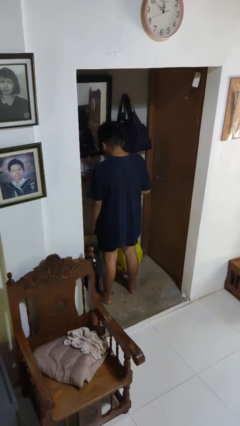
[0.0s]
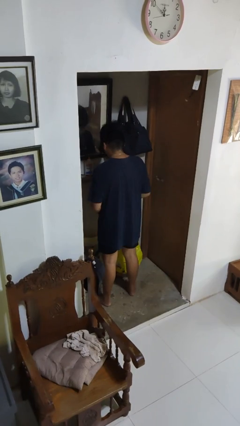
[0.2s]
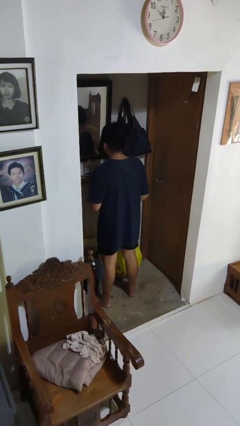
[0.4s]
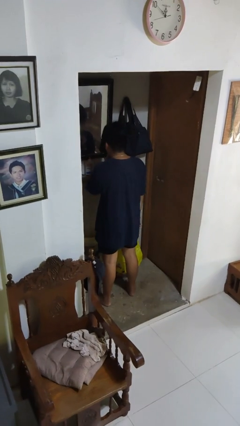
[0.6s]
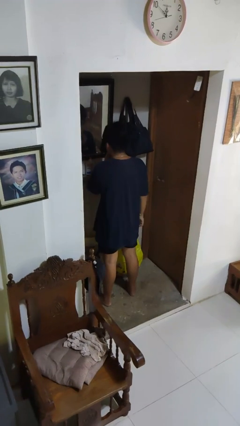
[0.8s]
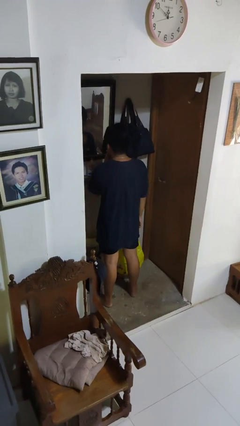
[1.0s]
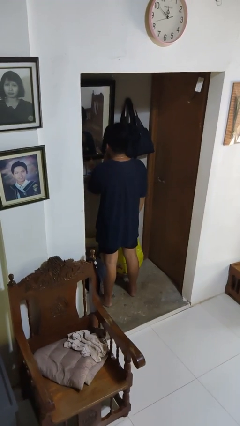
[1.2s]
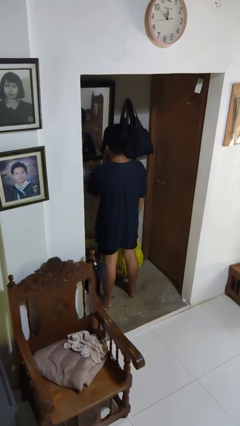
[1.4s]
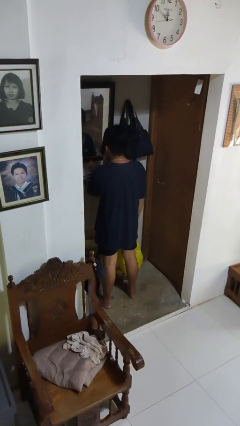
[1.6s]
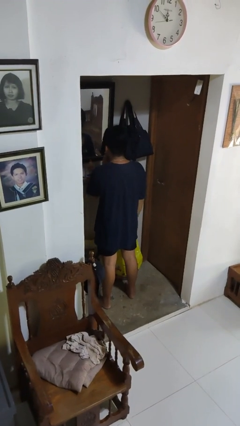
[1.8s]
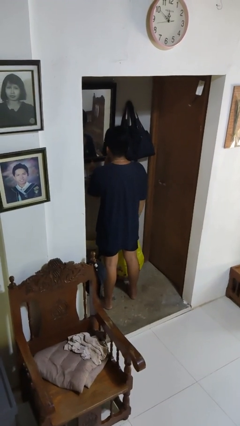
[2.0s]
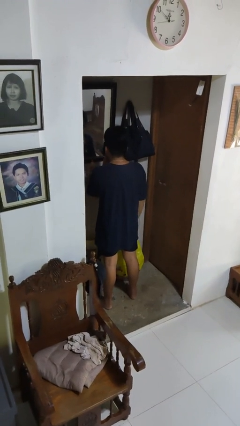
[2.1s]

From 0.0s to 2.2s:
person applies lip makeup

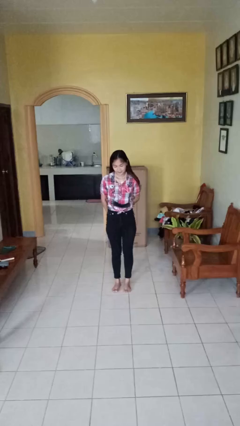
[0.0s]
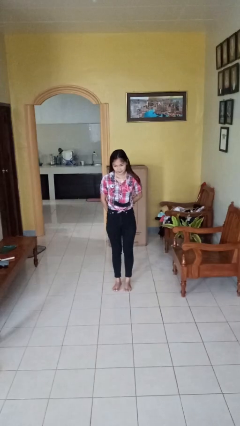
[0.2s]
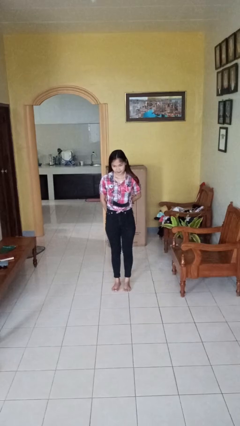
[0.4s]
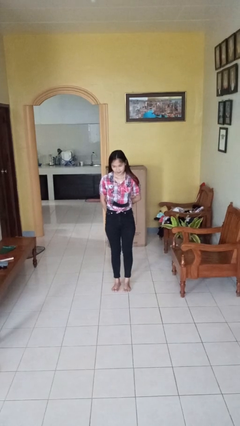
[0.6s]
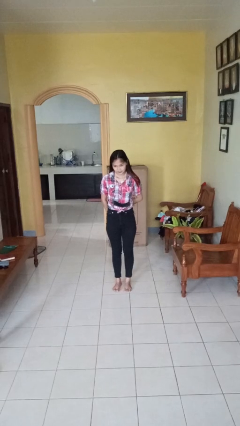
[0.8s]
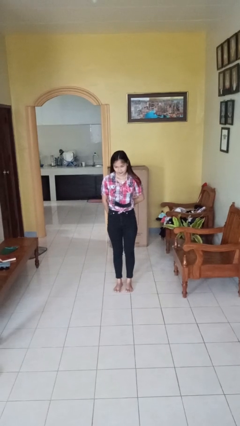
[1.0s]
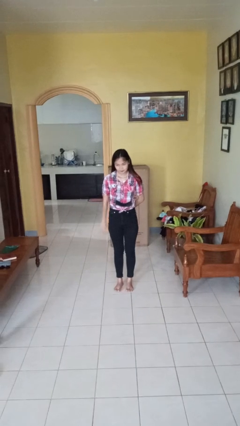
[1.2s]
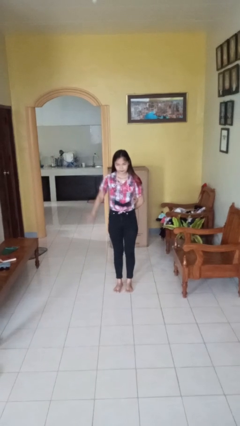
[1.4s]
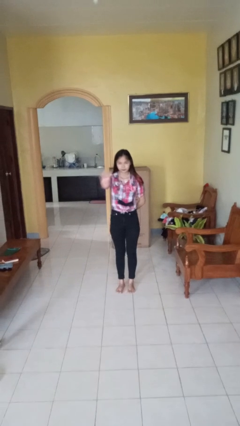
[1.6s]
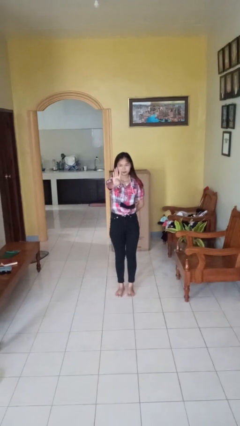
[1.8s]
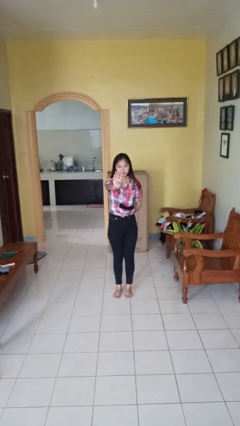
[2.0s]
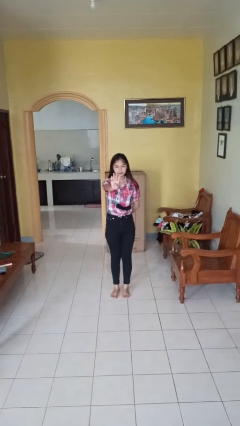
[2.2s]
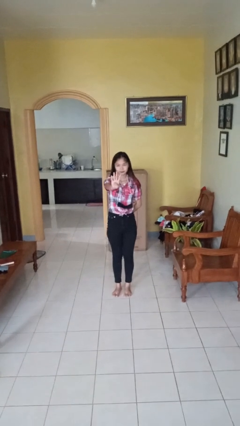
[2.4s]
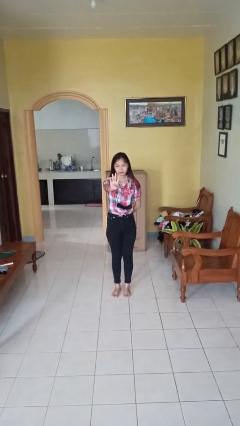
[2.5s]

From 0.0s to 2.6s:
person gestures number four

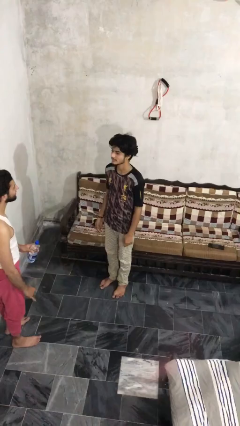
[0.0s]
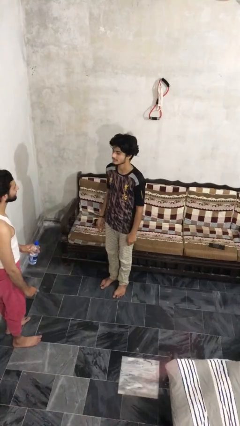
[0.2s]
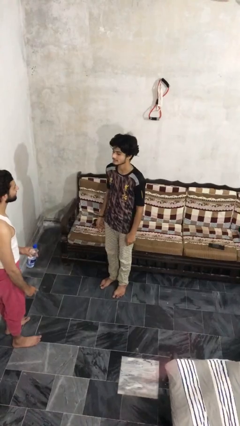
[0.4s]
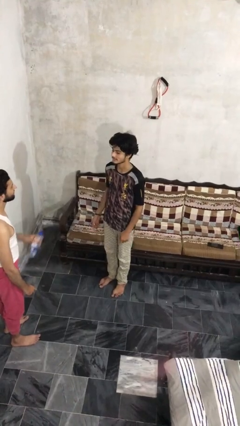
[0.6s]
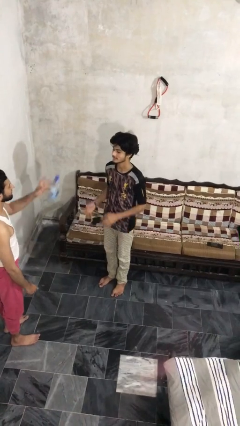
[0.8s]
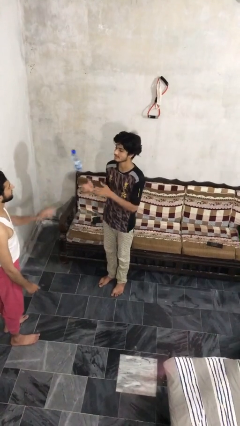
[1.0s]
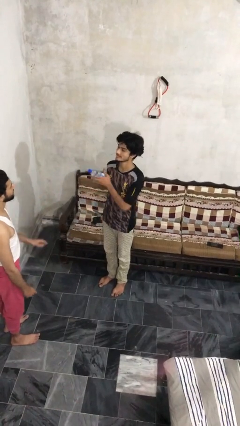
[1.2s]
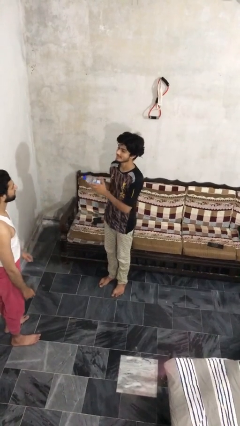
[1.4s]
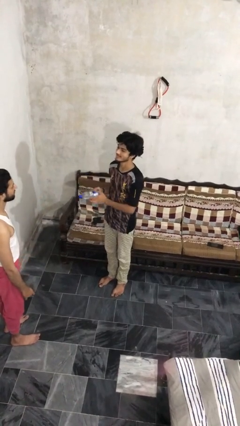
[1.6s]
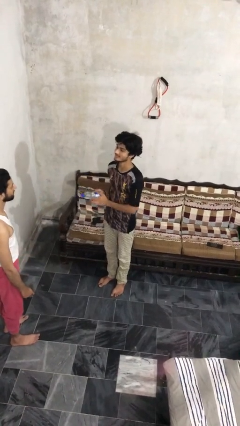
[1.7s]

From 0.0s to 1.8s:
person catches object from person

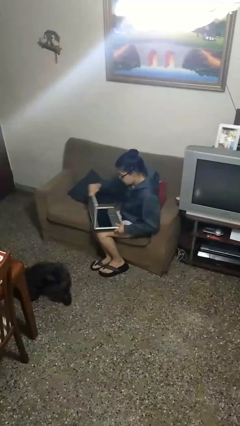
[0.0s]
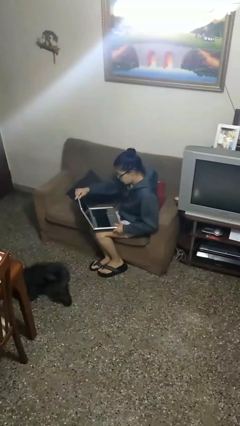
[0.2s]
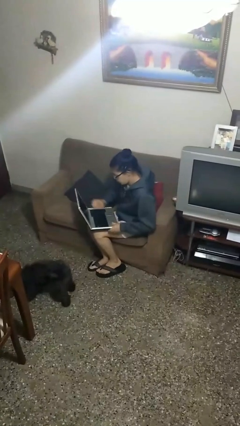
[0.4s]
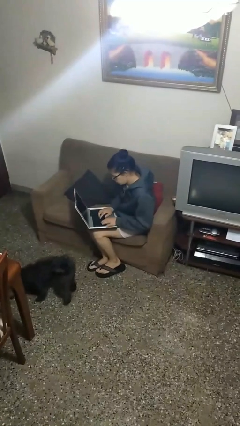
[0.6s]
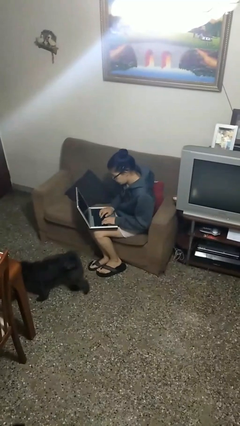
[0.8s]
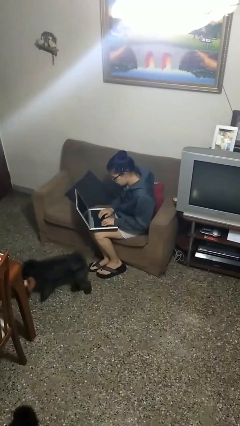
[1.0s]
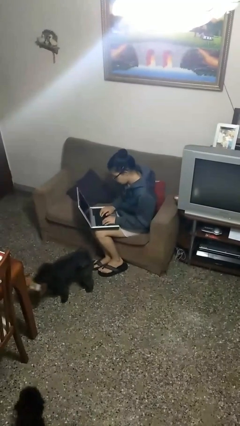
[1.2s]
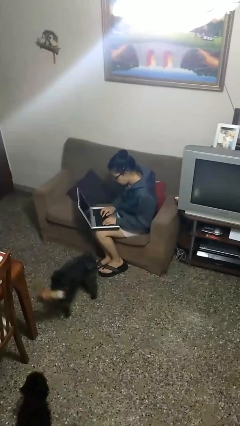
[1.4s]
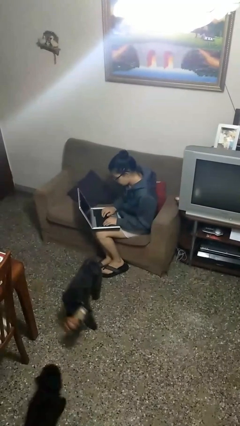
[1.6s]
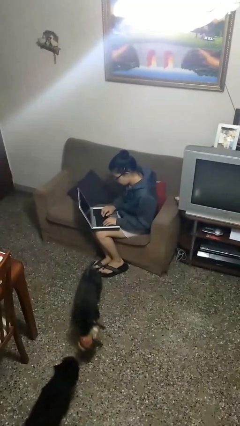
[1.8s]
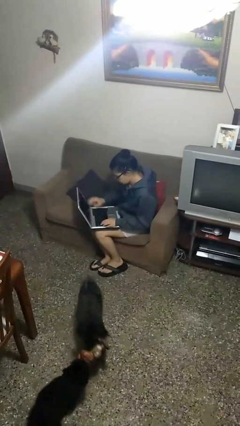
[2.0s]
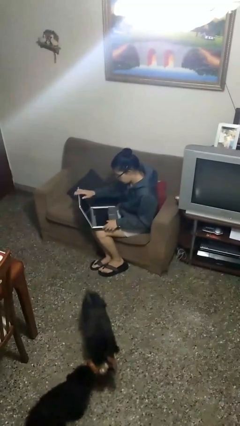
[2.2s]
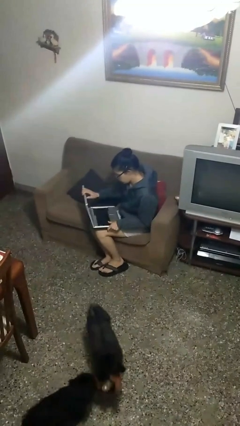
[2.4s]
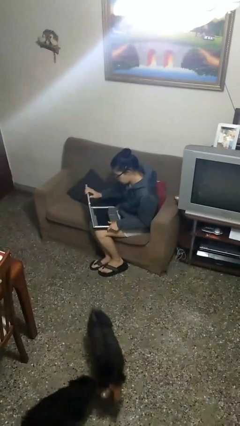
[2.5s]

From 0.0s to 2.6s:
person interacts with laptop

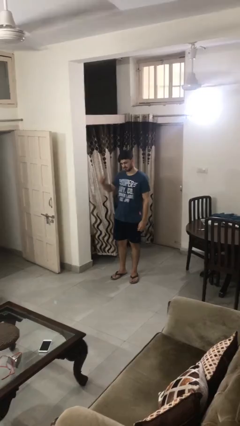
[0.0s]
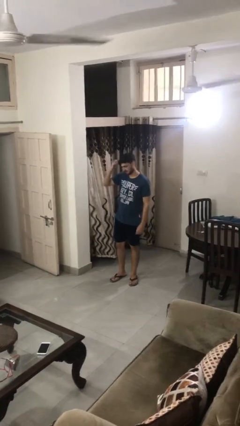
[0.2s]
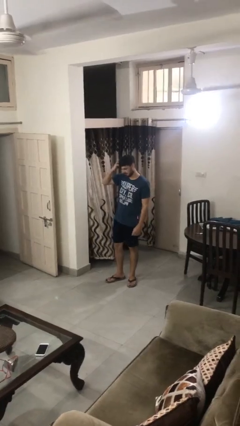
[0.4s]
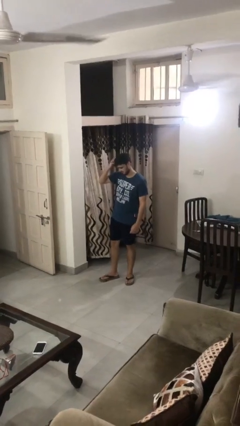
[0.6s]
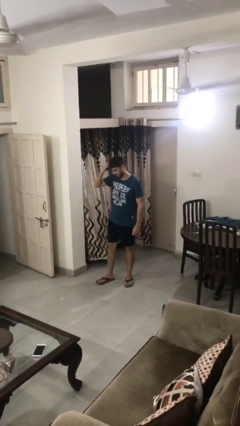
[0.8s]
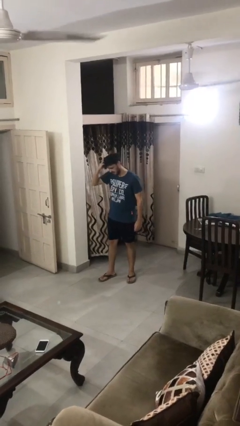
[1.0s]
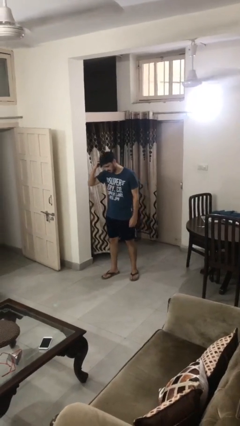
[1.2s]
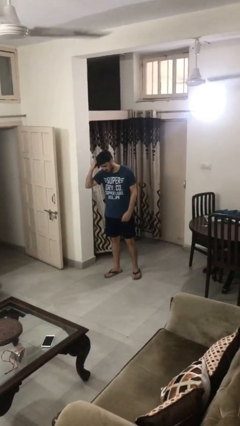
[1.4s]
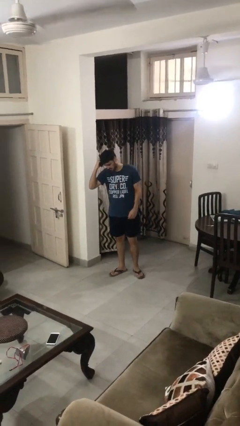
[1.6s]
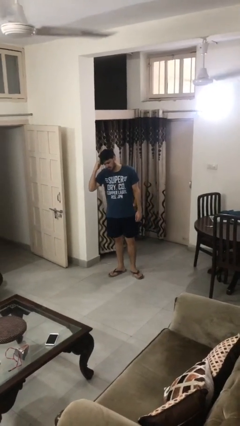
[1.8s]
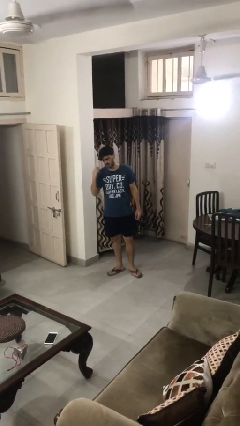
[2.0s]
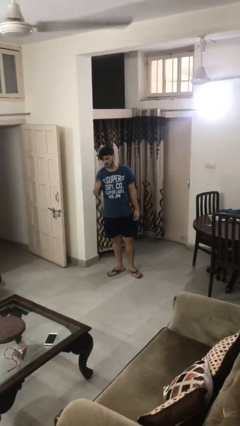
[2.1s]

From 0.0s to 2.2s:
person scratches face

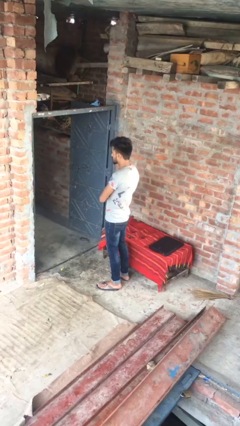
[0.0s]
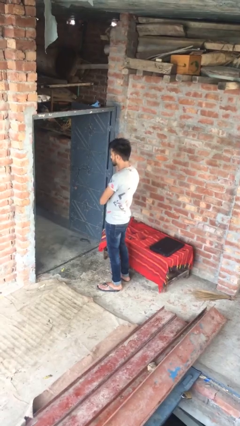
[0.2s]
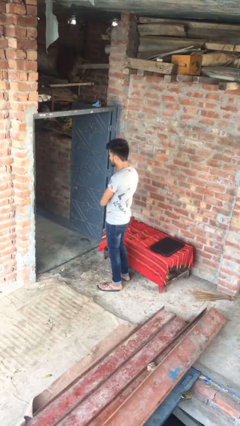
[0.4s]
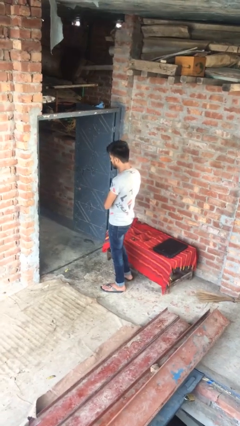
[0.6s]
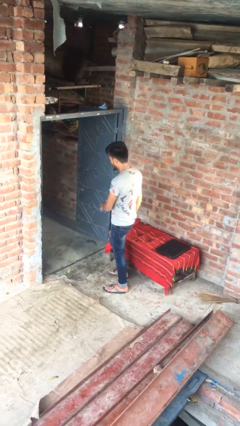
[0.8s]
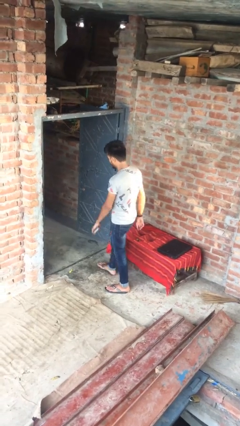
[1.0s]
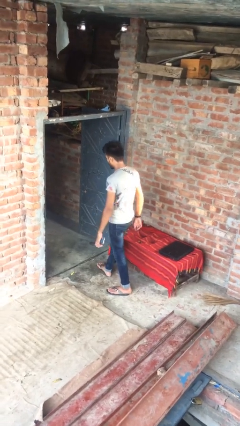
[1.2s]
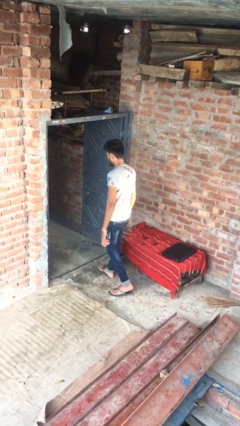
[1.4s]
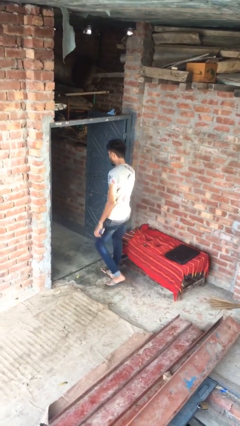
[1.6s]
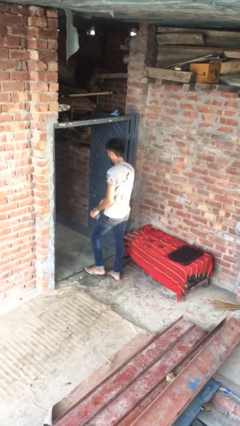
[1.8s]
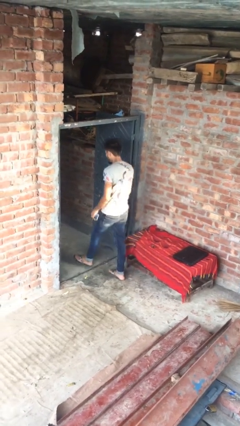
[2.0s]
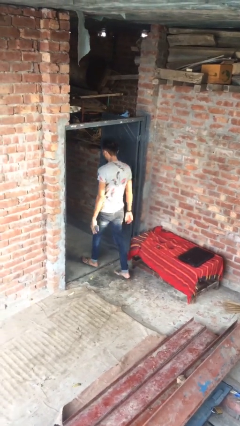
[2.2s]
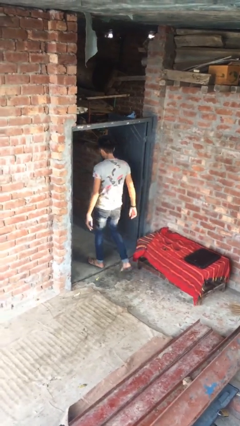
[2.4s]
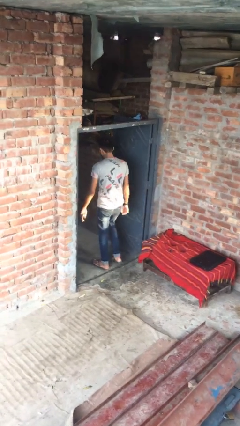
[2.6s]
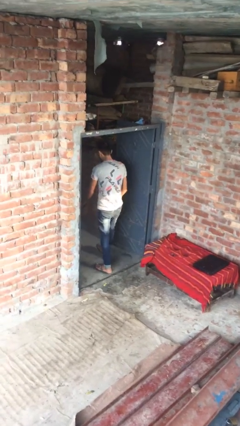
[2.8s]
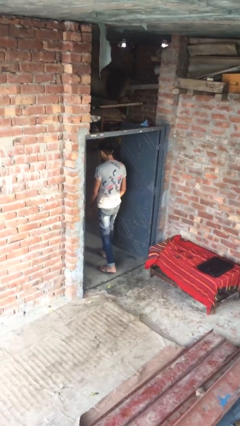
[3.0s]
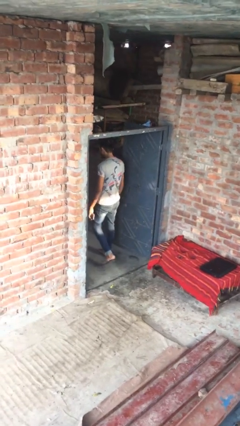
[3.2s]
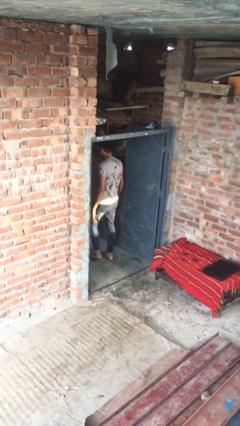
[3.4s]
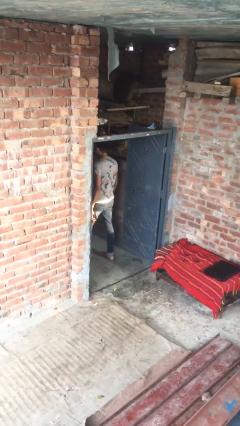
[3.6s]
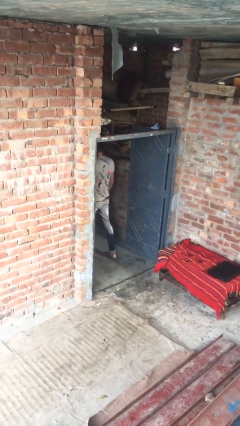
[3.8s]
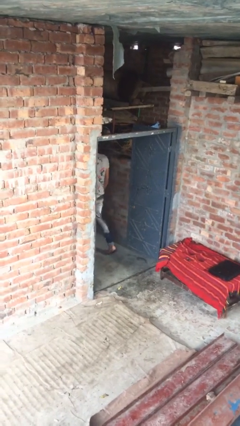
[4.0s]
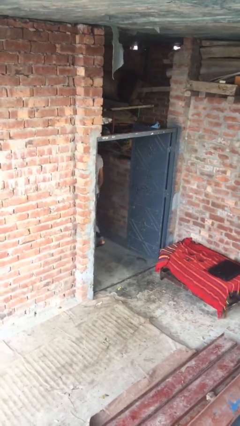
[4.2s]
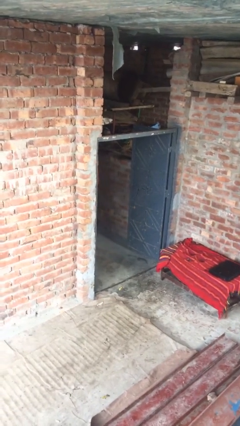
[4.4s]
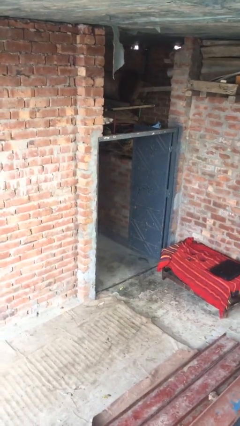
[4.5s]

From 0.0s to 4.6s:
person exits scene through structure

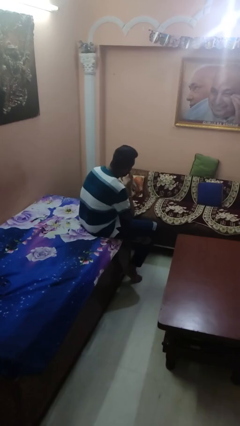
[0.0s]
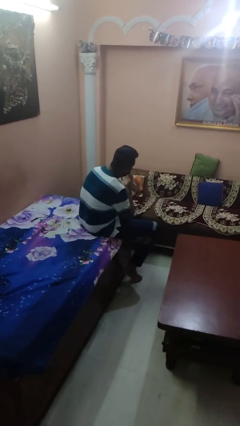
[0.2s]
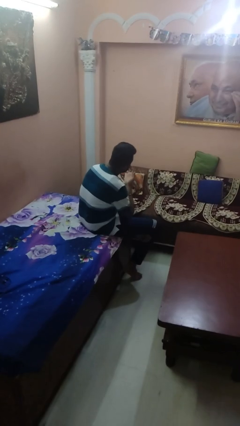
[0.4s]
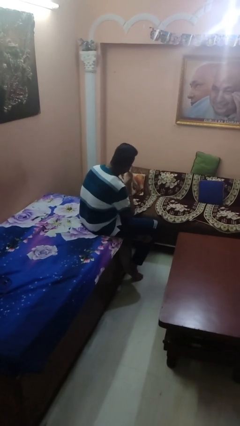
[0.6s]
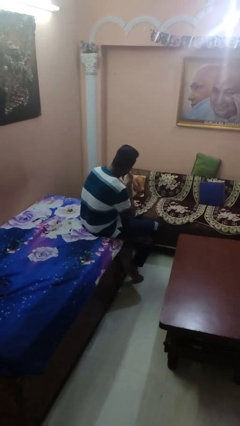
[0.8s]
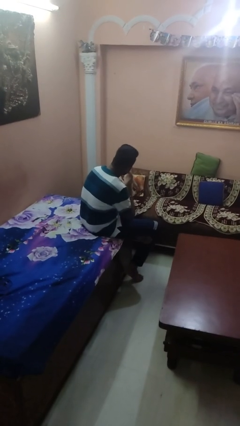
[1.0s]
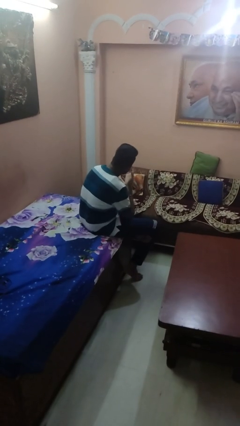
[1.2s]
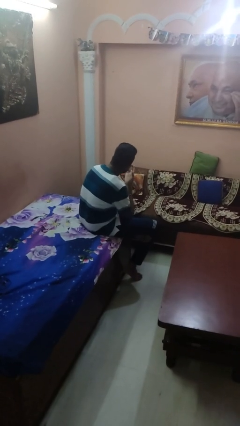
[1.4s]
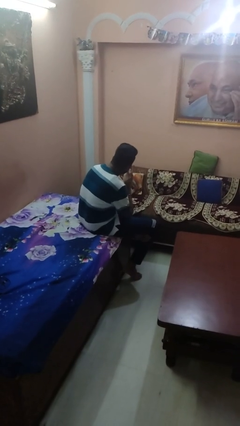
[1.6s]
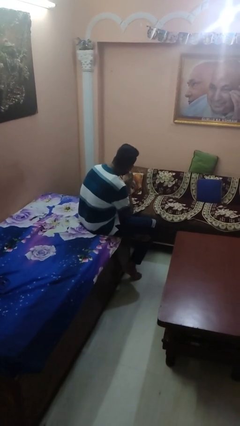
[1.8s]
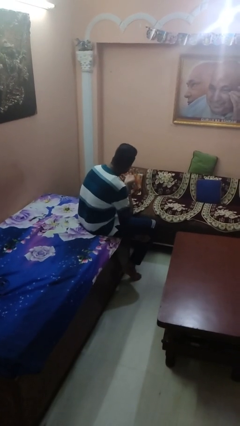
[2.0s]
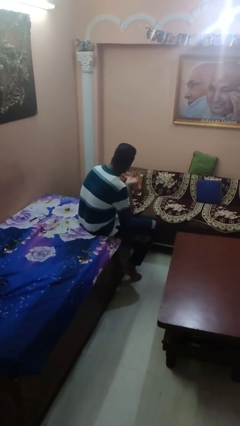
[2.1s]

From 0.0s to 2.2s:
person licks fingers
